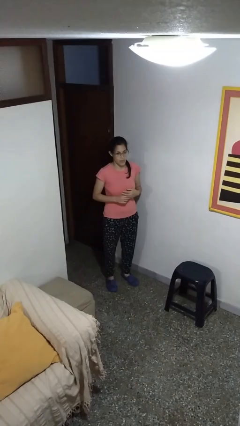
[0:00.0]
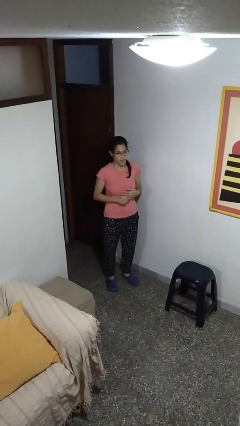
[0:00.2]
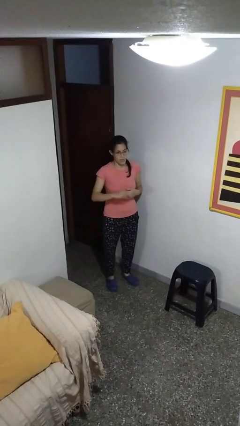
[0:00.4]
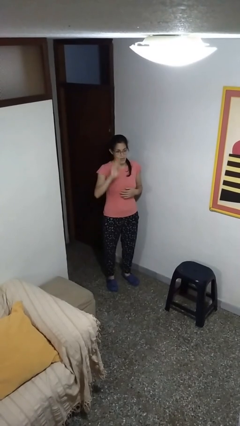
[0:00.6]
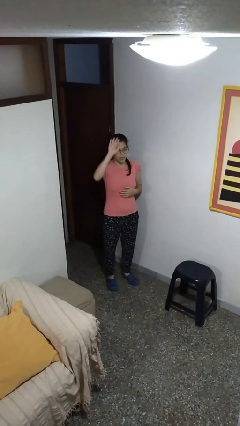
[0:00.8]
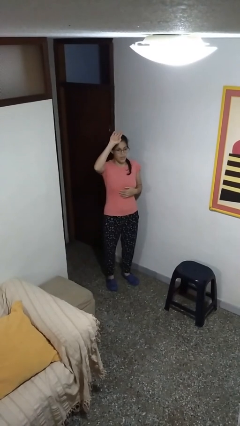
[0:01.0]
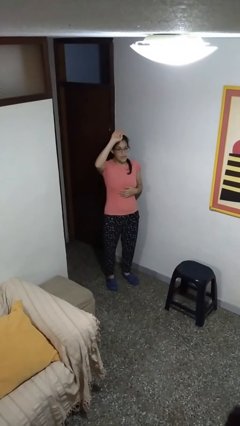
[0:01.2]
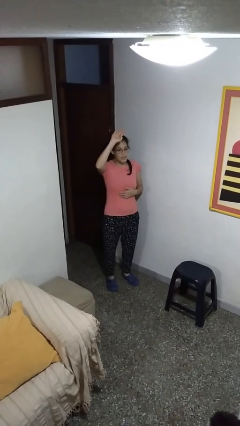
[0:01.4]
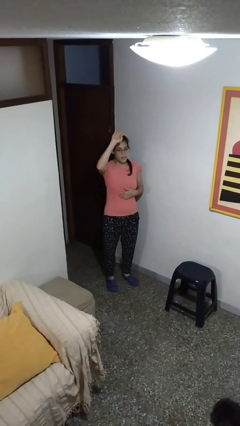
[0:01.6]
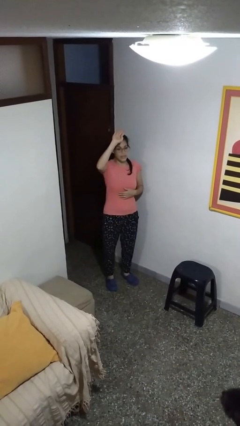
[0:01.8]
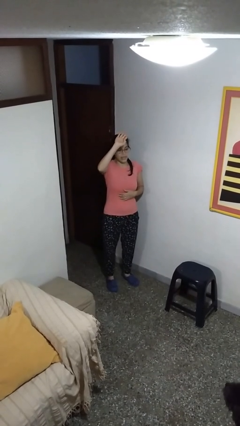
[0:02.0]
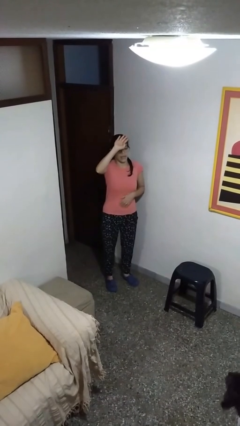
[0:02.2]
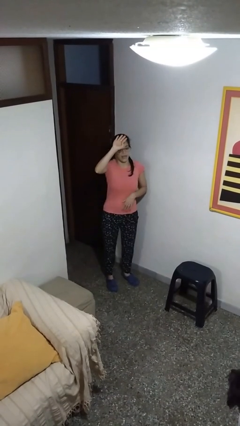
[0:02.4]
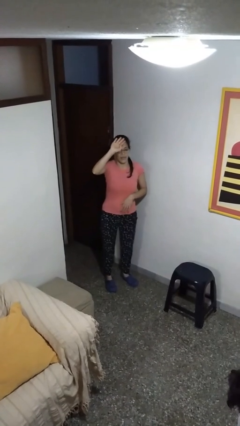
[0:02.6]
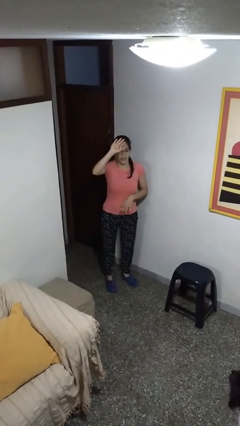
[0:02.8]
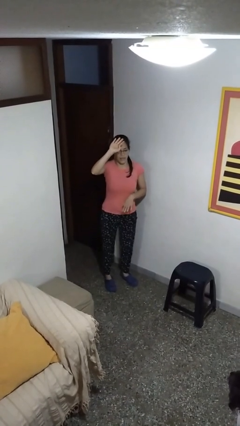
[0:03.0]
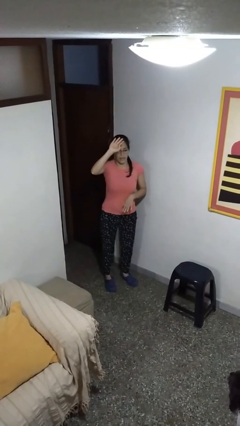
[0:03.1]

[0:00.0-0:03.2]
person gestures raise hand

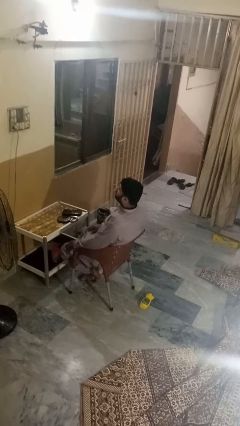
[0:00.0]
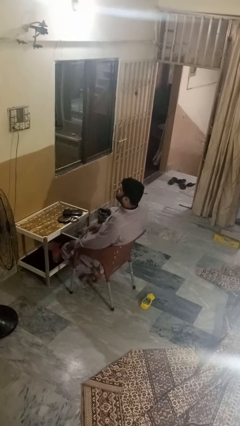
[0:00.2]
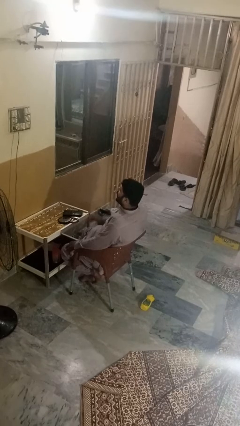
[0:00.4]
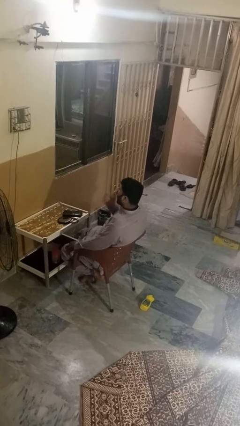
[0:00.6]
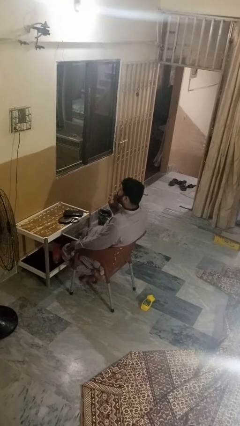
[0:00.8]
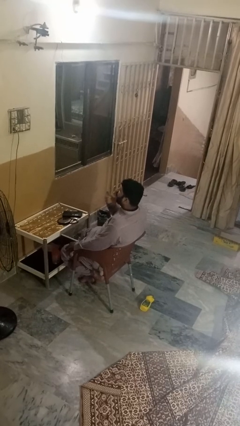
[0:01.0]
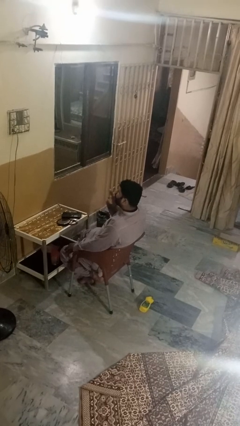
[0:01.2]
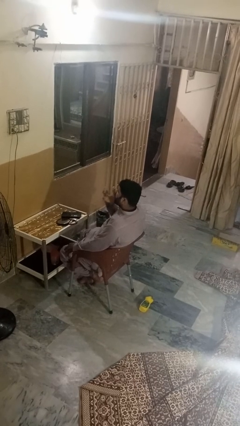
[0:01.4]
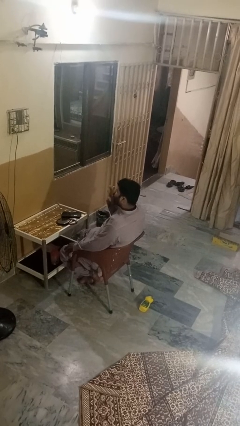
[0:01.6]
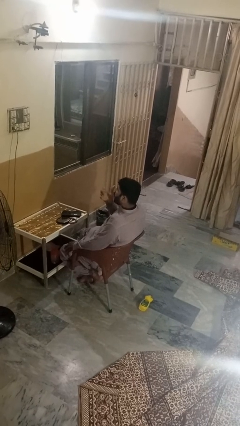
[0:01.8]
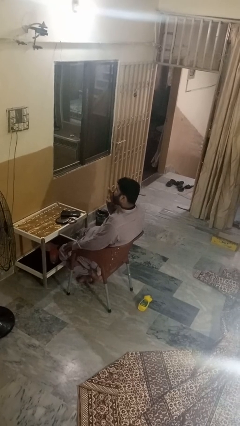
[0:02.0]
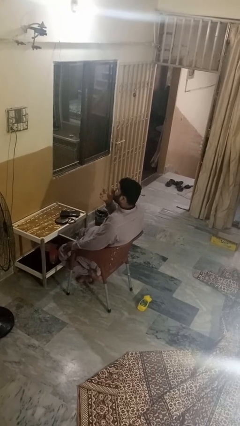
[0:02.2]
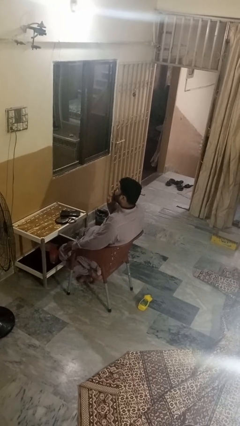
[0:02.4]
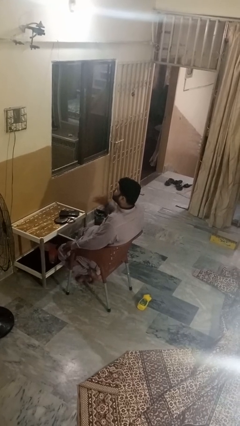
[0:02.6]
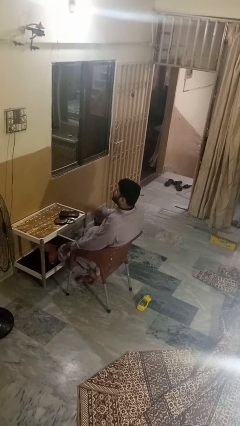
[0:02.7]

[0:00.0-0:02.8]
person licks fingers

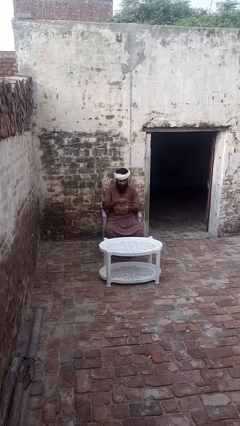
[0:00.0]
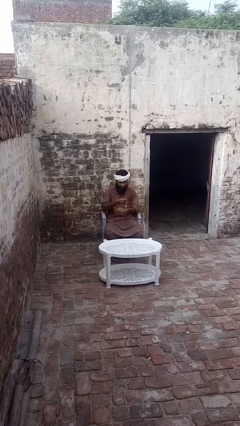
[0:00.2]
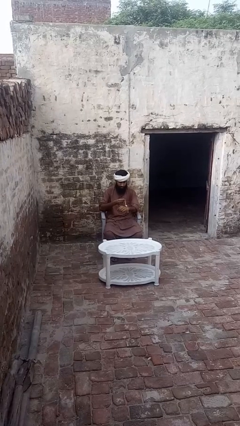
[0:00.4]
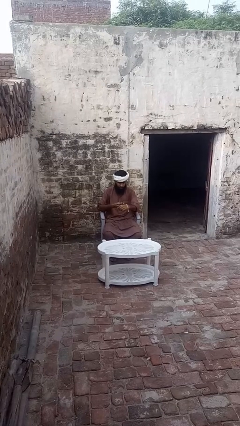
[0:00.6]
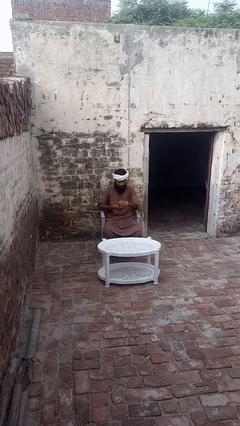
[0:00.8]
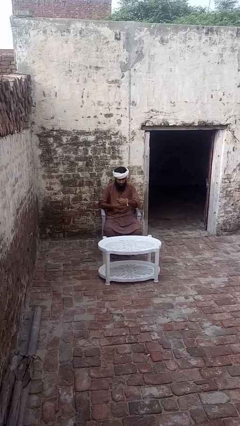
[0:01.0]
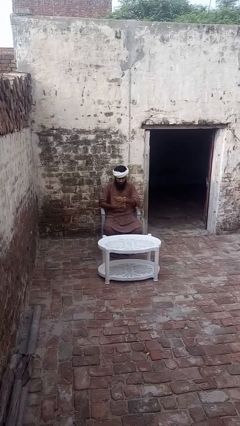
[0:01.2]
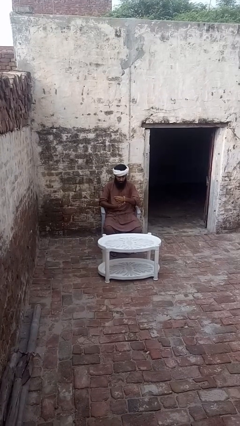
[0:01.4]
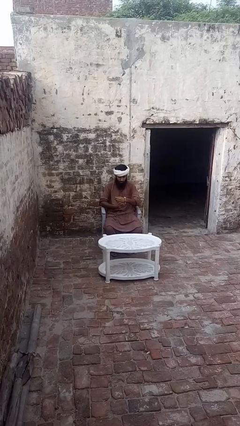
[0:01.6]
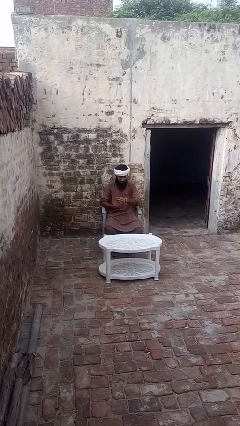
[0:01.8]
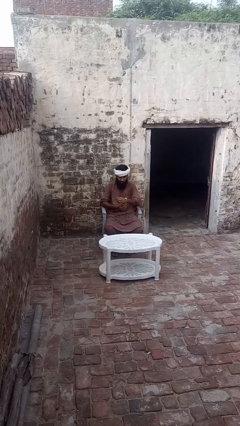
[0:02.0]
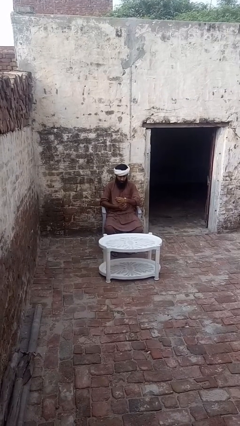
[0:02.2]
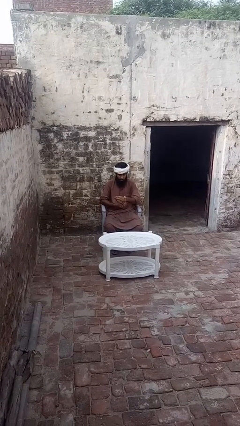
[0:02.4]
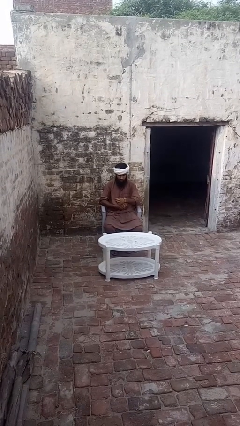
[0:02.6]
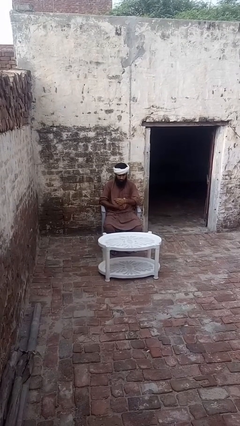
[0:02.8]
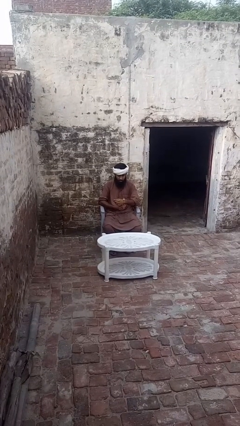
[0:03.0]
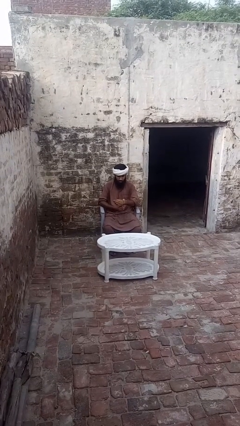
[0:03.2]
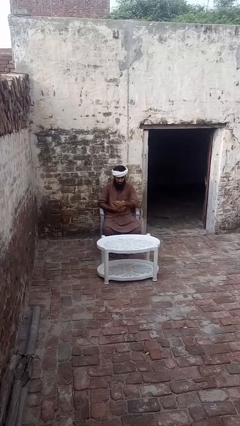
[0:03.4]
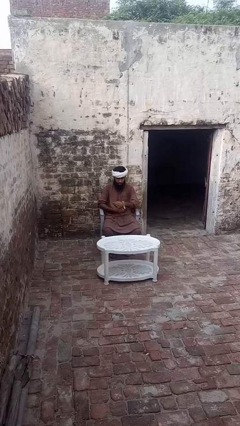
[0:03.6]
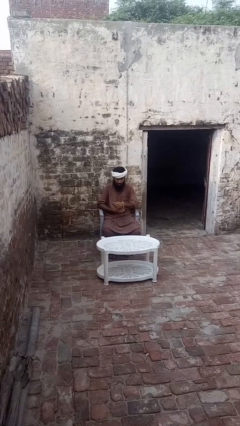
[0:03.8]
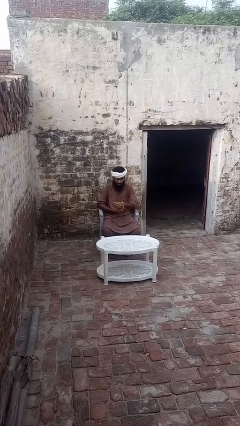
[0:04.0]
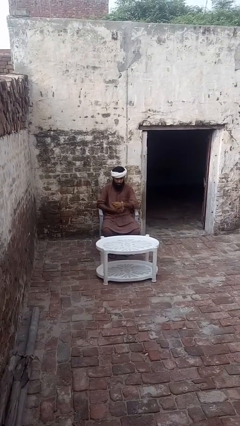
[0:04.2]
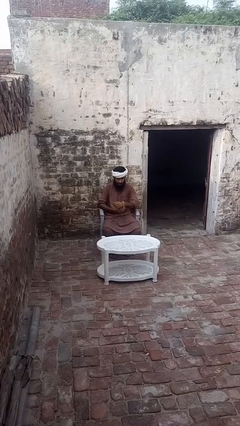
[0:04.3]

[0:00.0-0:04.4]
person puts on wristwatch

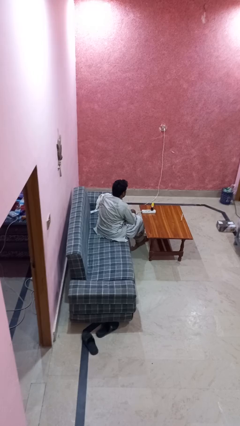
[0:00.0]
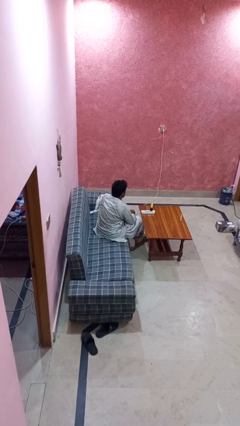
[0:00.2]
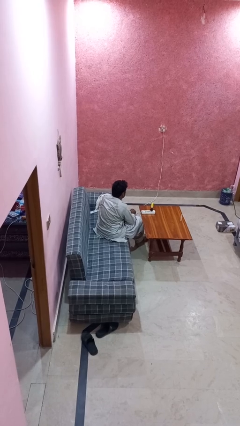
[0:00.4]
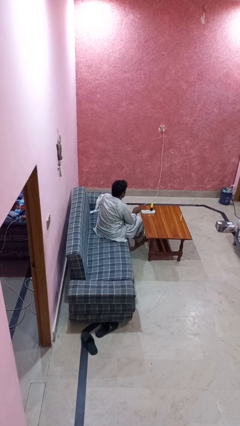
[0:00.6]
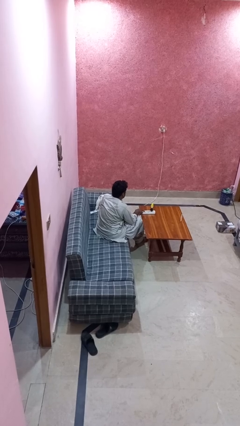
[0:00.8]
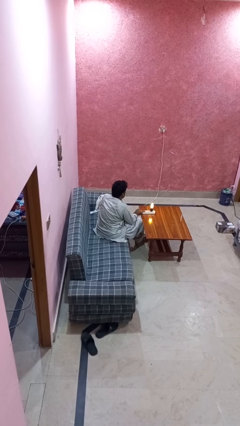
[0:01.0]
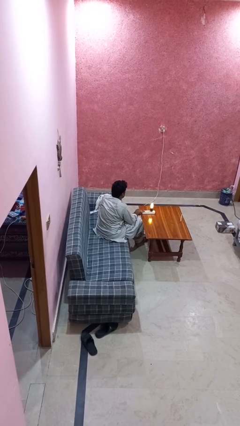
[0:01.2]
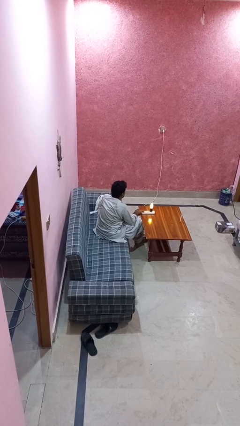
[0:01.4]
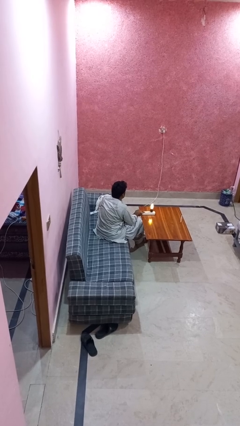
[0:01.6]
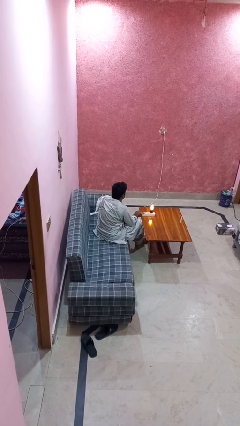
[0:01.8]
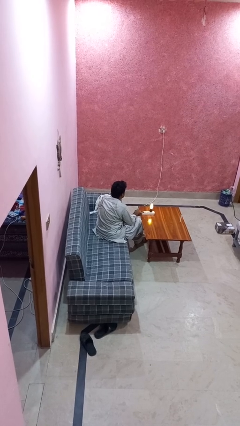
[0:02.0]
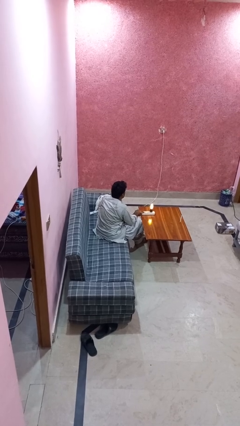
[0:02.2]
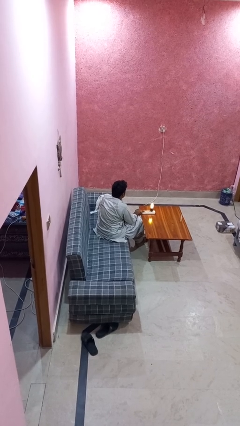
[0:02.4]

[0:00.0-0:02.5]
person turns on lamp

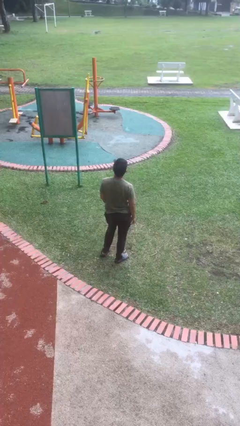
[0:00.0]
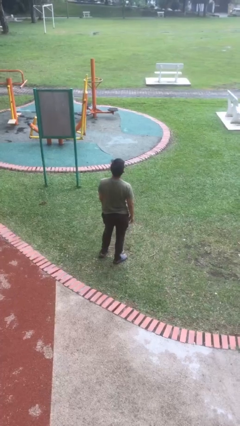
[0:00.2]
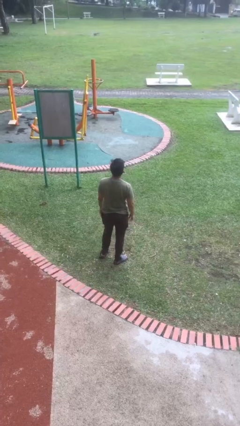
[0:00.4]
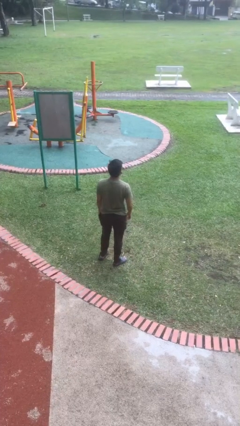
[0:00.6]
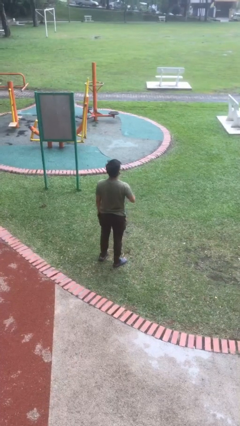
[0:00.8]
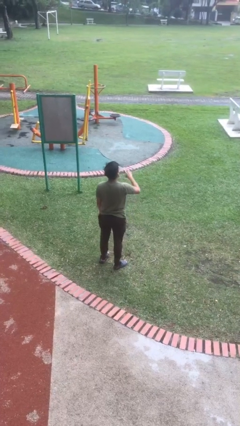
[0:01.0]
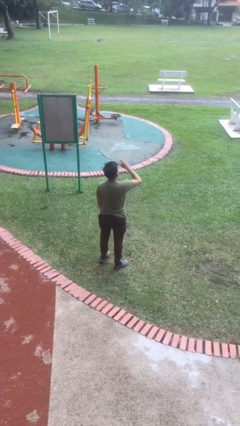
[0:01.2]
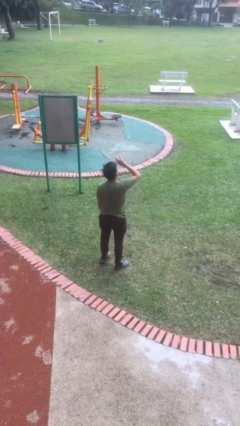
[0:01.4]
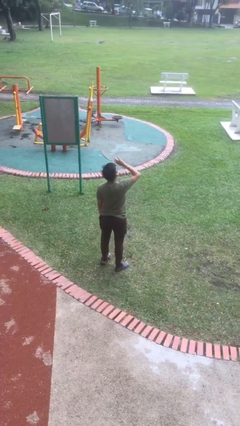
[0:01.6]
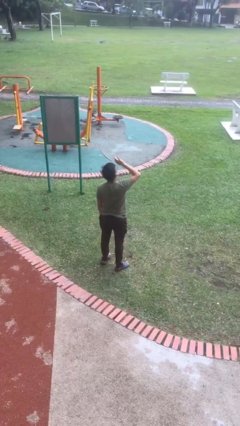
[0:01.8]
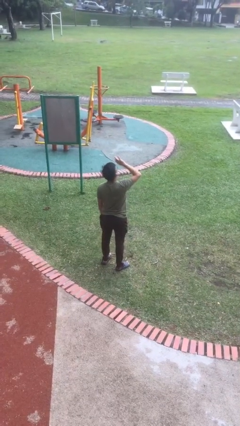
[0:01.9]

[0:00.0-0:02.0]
person shades eyes

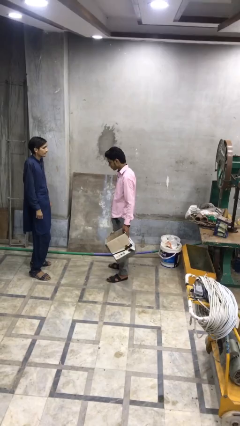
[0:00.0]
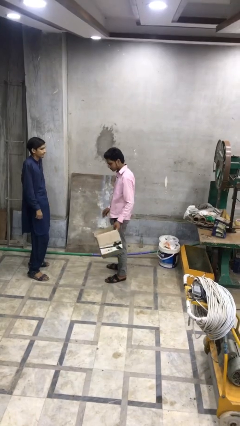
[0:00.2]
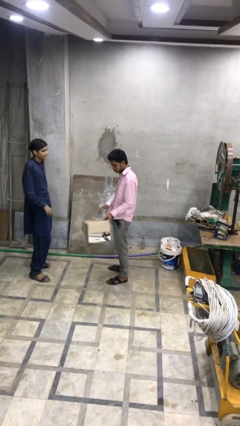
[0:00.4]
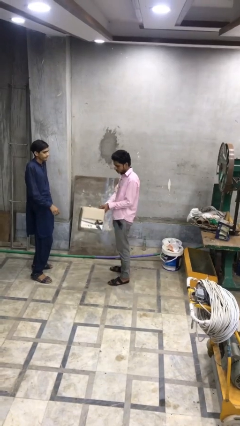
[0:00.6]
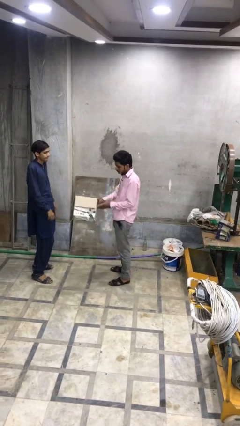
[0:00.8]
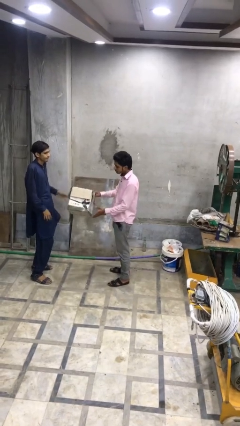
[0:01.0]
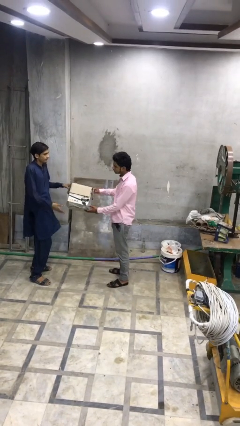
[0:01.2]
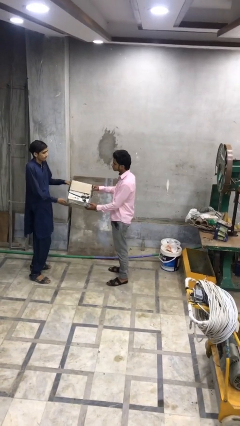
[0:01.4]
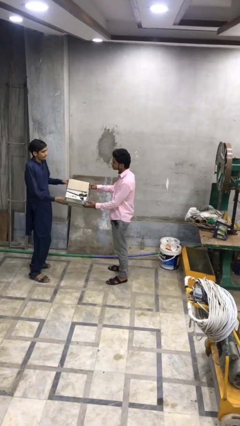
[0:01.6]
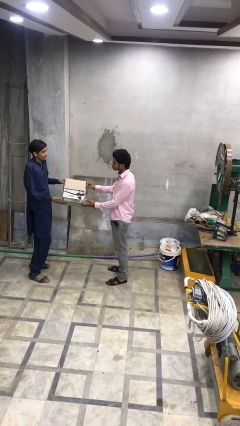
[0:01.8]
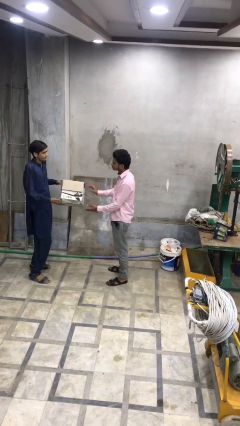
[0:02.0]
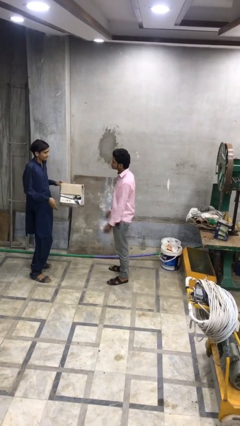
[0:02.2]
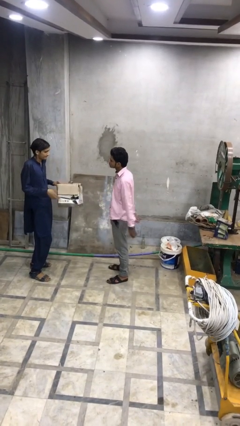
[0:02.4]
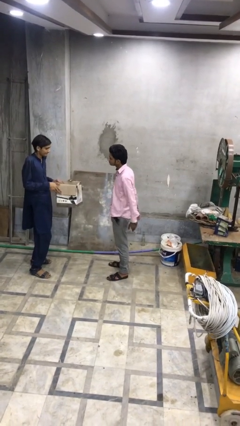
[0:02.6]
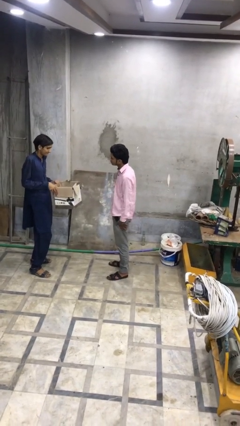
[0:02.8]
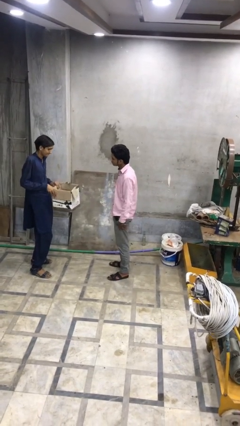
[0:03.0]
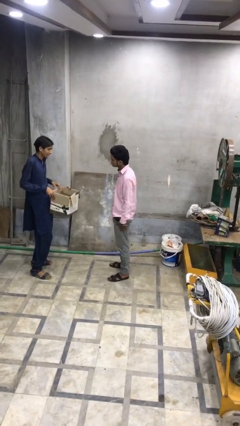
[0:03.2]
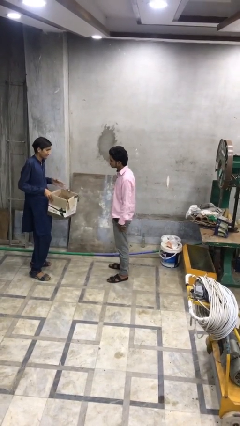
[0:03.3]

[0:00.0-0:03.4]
person transfers object to person
